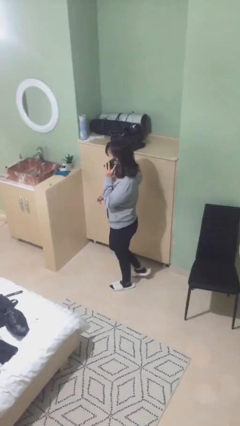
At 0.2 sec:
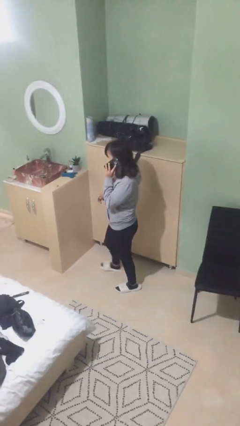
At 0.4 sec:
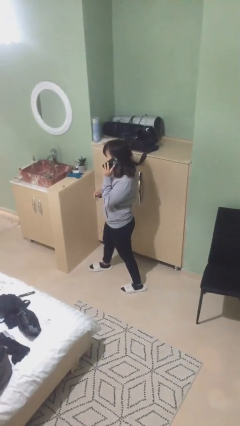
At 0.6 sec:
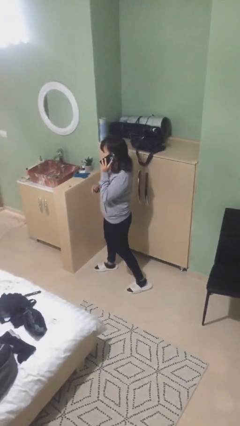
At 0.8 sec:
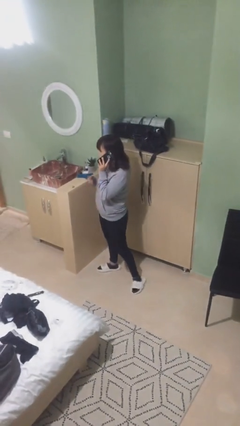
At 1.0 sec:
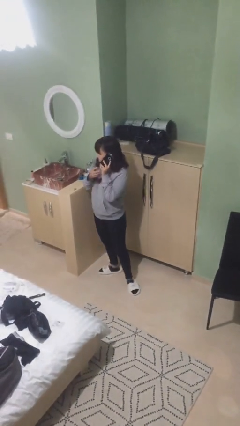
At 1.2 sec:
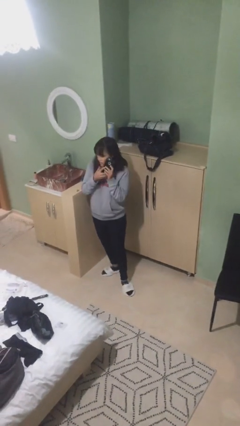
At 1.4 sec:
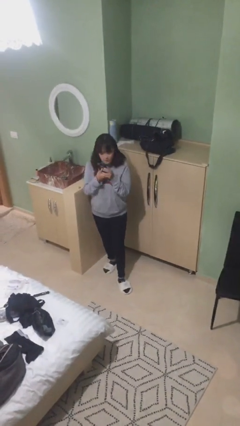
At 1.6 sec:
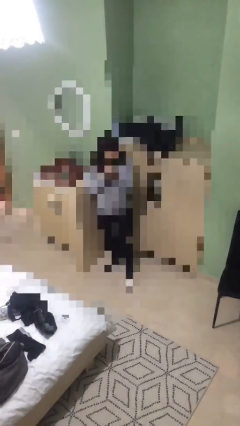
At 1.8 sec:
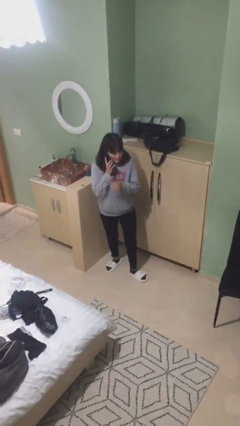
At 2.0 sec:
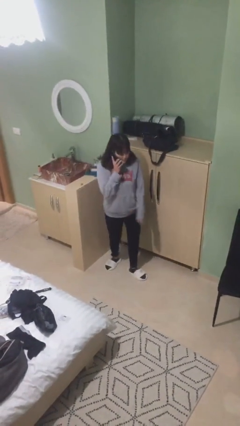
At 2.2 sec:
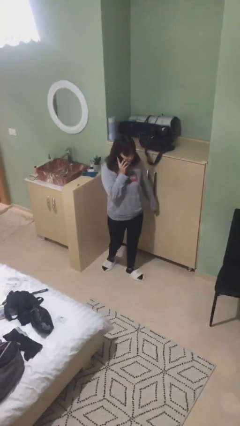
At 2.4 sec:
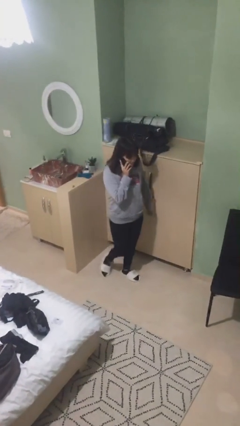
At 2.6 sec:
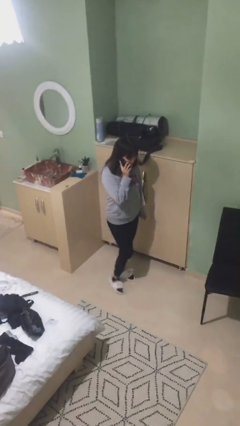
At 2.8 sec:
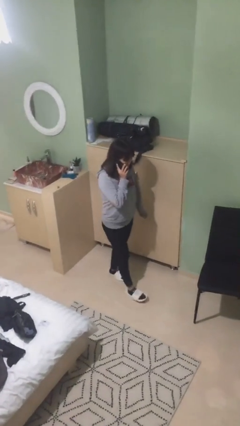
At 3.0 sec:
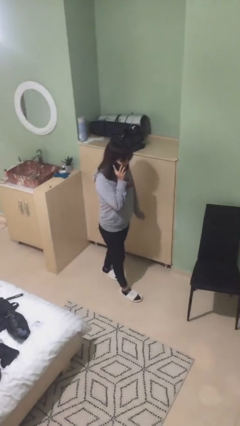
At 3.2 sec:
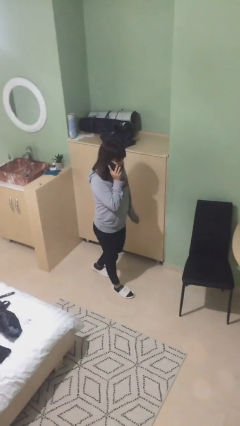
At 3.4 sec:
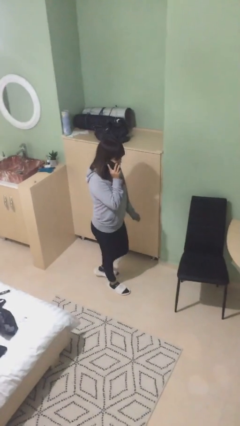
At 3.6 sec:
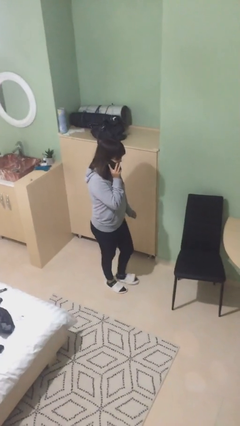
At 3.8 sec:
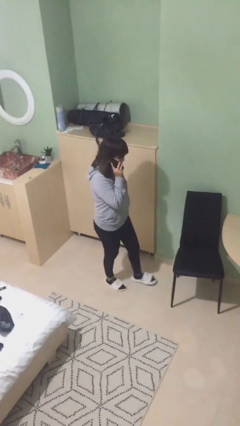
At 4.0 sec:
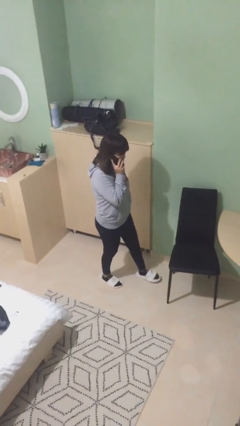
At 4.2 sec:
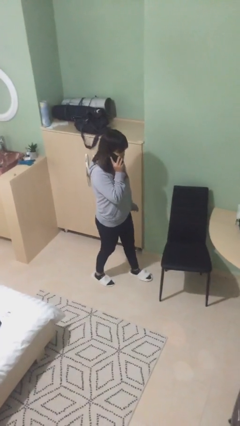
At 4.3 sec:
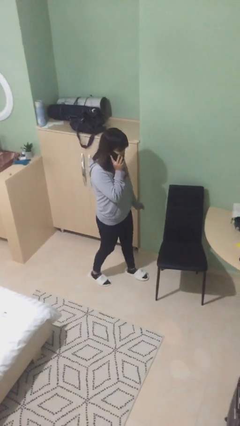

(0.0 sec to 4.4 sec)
person talks on phone

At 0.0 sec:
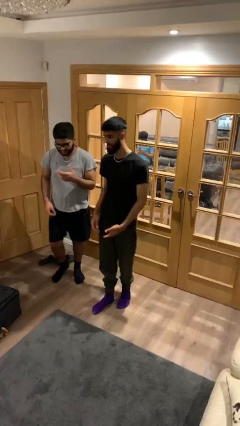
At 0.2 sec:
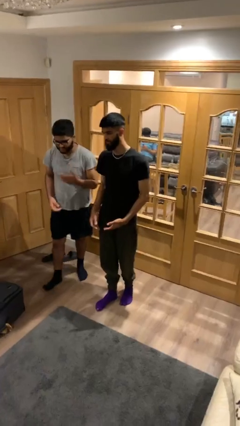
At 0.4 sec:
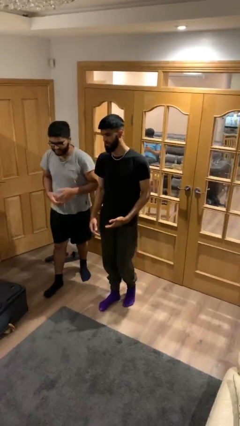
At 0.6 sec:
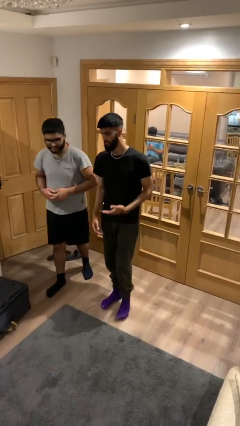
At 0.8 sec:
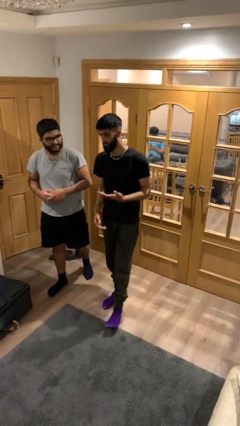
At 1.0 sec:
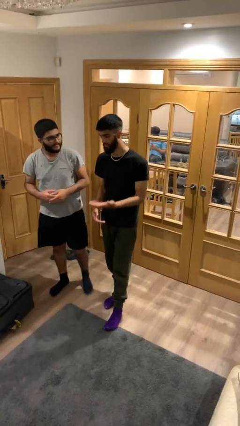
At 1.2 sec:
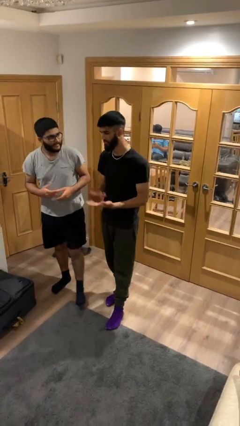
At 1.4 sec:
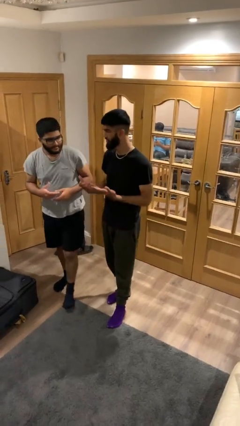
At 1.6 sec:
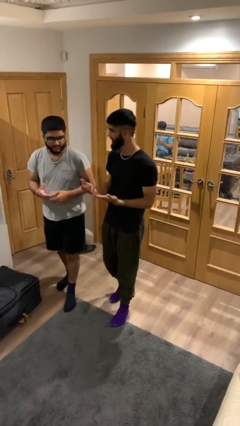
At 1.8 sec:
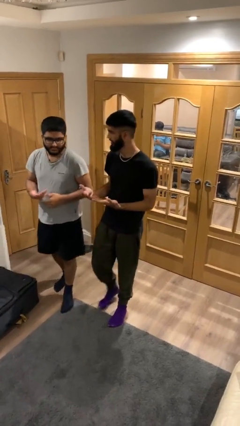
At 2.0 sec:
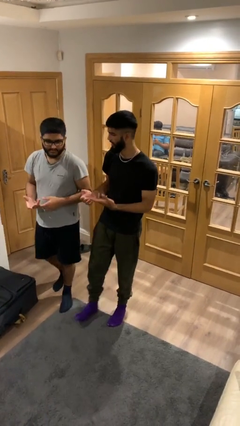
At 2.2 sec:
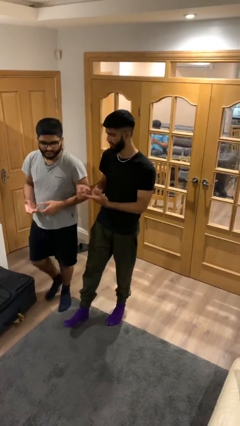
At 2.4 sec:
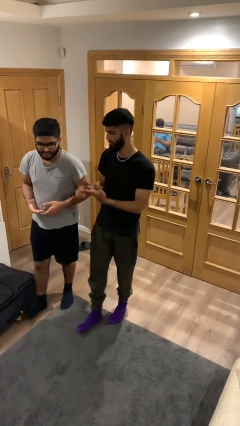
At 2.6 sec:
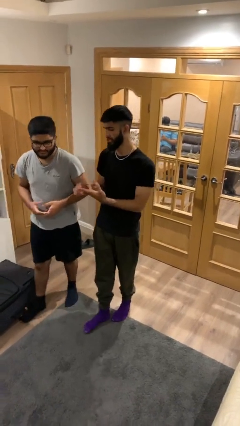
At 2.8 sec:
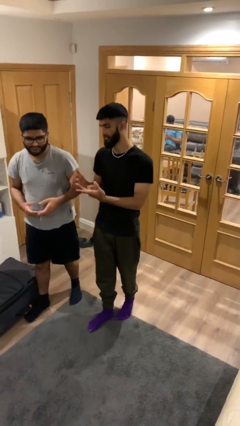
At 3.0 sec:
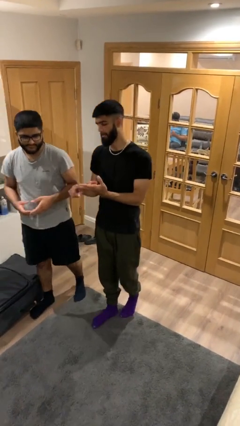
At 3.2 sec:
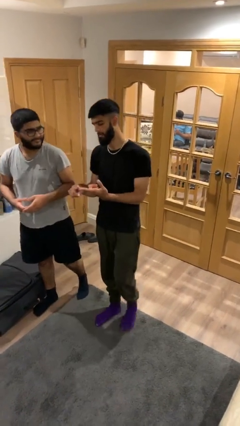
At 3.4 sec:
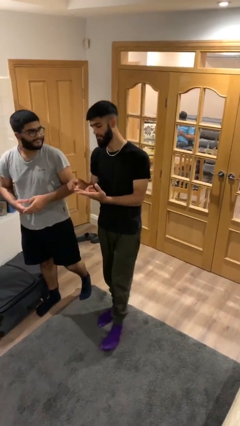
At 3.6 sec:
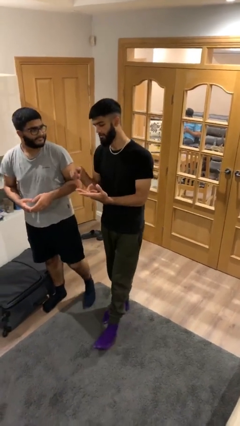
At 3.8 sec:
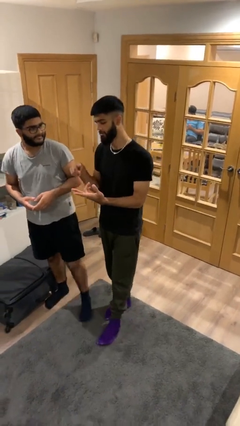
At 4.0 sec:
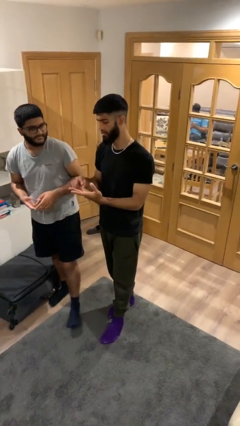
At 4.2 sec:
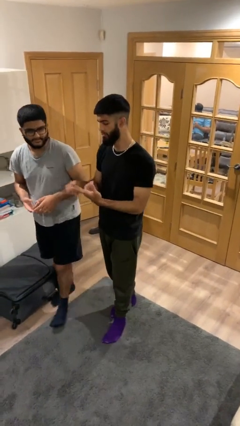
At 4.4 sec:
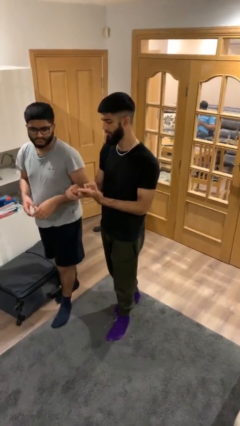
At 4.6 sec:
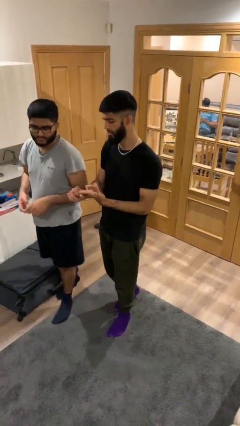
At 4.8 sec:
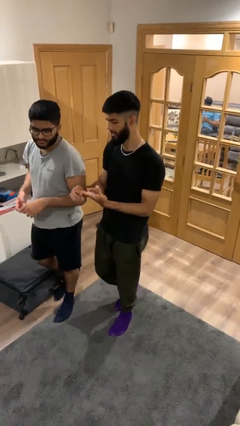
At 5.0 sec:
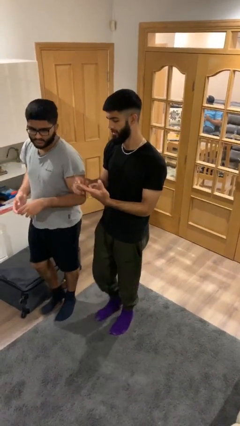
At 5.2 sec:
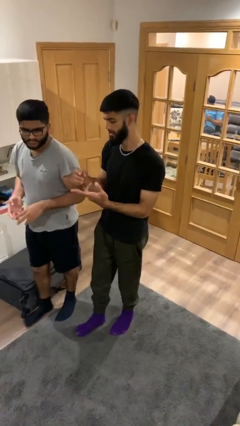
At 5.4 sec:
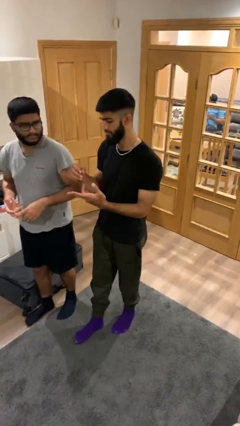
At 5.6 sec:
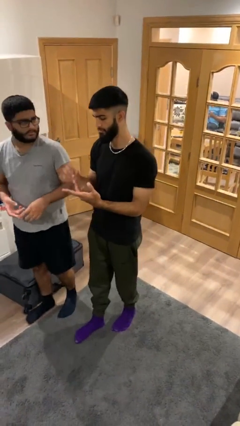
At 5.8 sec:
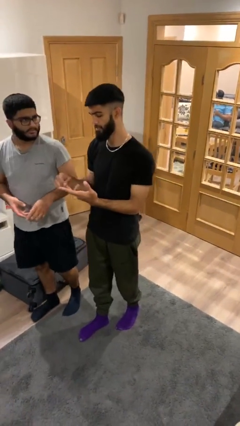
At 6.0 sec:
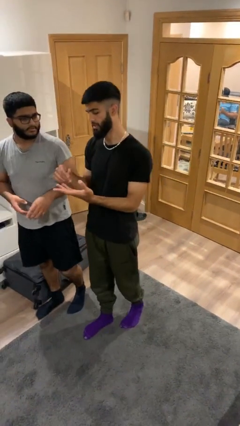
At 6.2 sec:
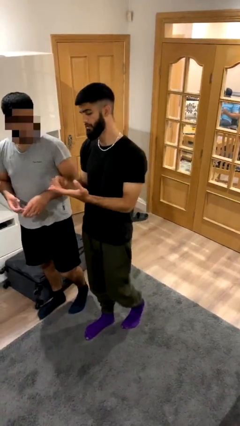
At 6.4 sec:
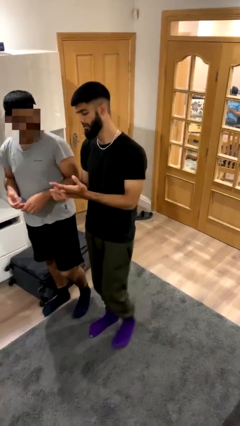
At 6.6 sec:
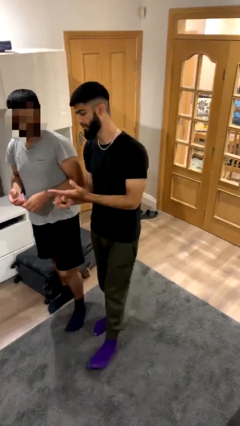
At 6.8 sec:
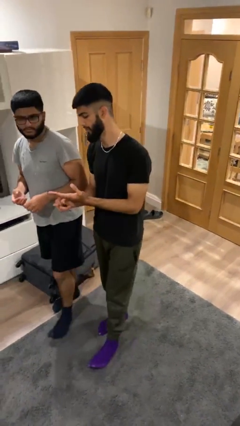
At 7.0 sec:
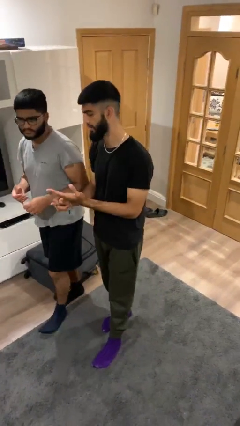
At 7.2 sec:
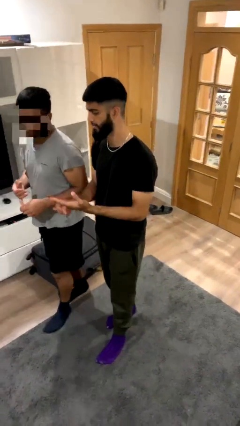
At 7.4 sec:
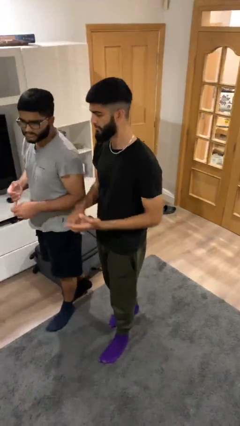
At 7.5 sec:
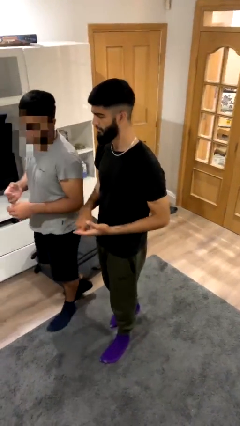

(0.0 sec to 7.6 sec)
person talks to person

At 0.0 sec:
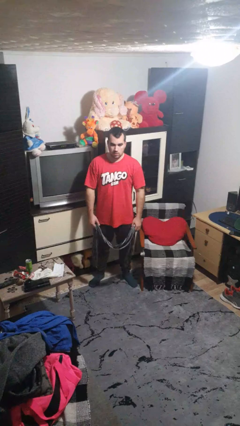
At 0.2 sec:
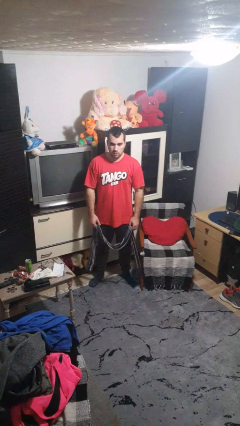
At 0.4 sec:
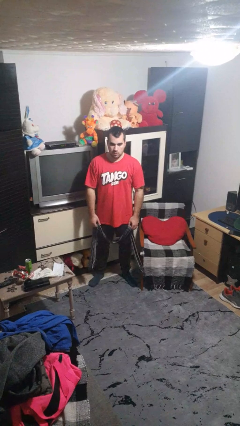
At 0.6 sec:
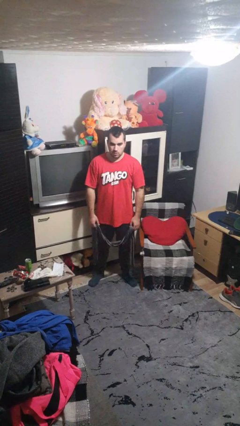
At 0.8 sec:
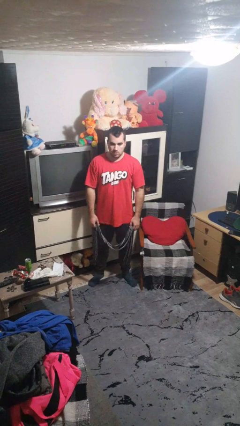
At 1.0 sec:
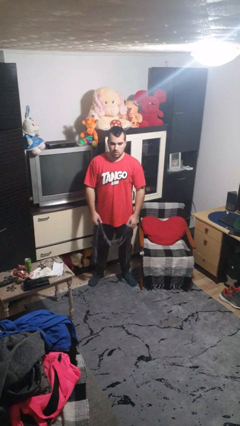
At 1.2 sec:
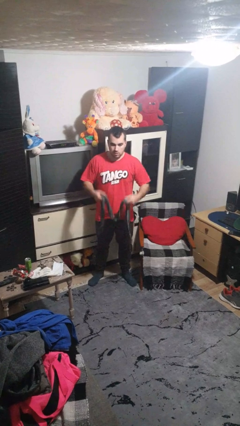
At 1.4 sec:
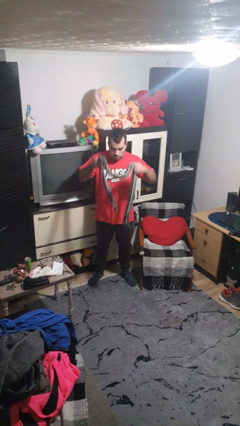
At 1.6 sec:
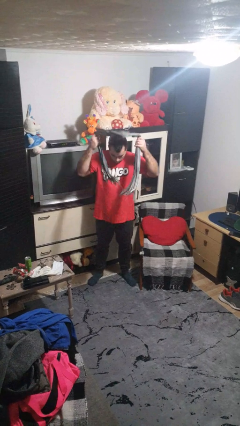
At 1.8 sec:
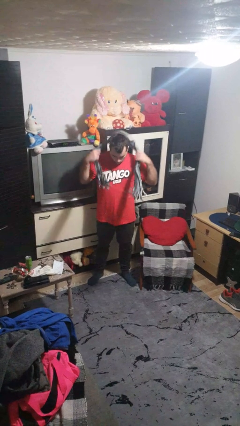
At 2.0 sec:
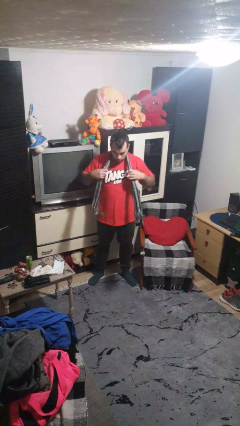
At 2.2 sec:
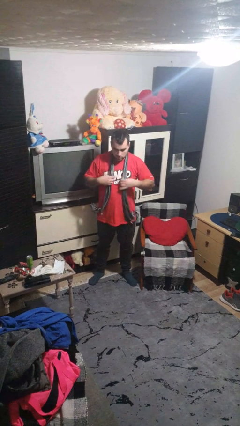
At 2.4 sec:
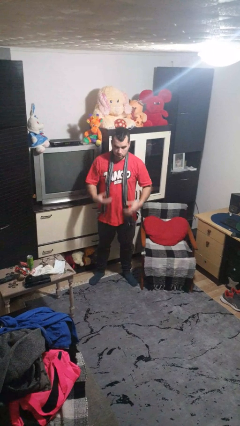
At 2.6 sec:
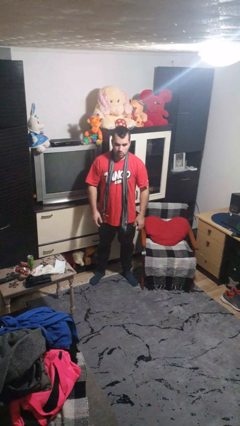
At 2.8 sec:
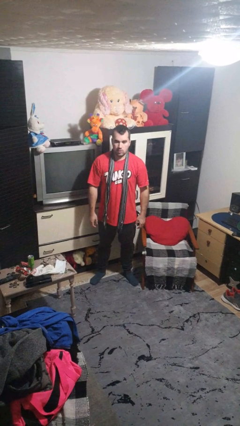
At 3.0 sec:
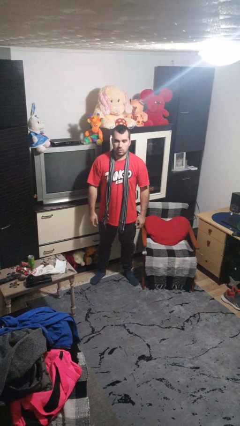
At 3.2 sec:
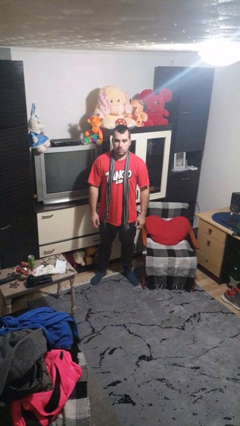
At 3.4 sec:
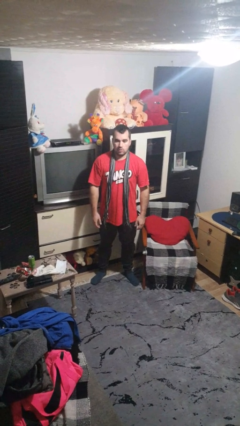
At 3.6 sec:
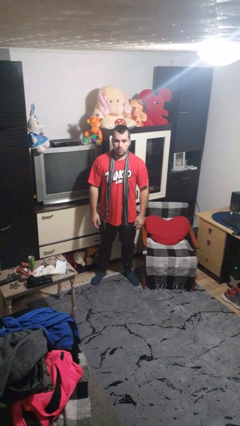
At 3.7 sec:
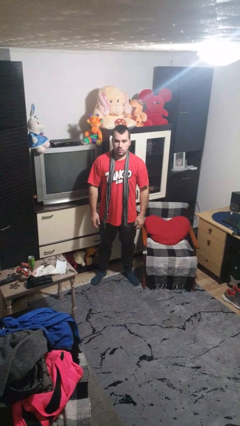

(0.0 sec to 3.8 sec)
person puts on scarf

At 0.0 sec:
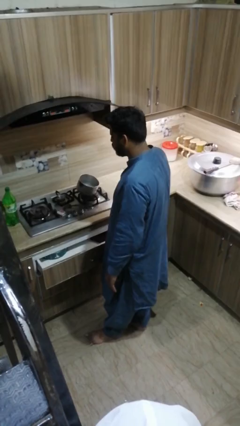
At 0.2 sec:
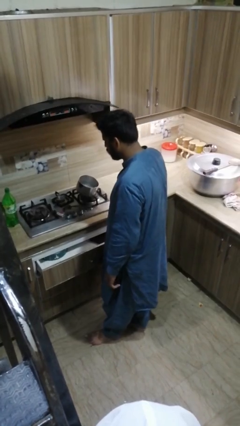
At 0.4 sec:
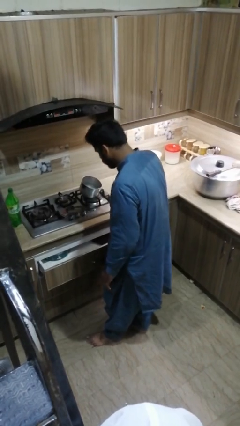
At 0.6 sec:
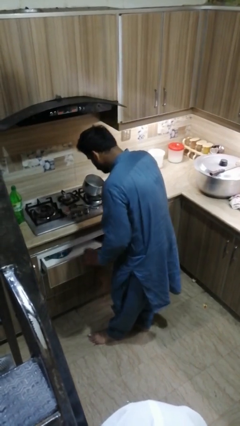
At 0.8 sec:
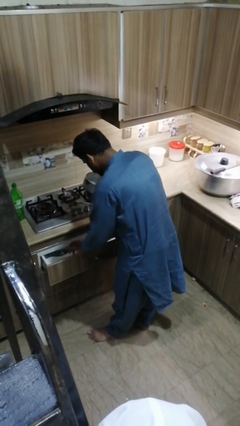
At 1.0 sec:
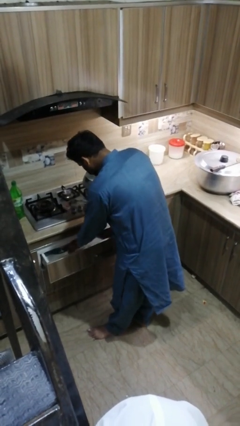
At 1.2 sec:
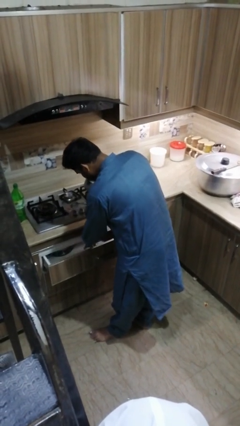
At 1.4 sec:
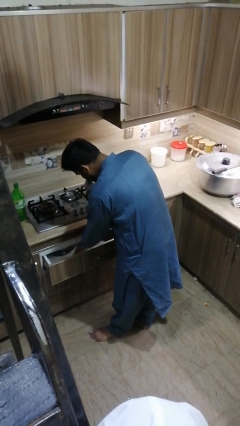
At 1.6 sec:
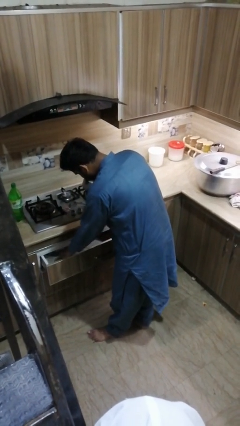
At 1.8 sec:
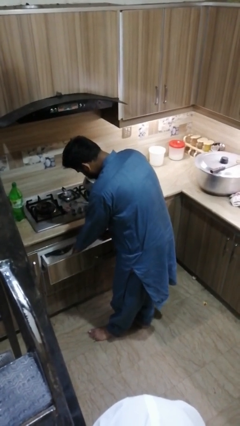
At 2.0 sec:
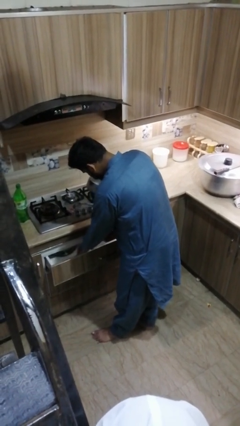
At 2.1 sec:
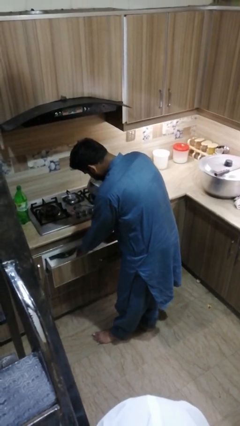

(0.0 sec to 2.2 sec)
person searches in kitchen drawer
